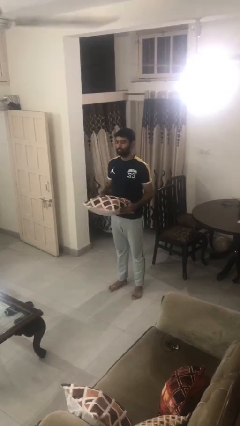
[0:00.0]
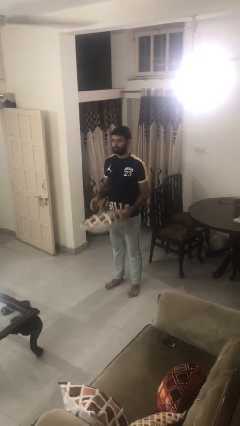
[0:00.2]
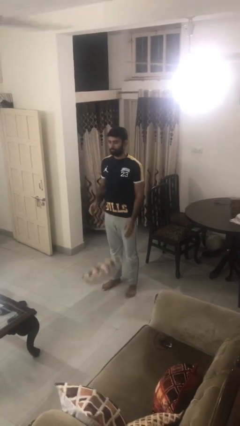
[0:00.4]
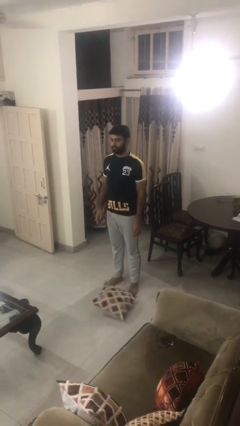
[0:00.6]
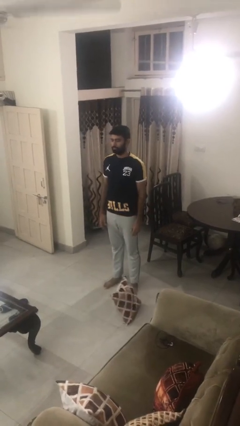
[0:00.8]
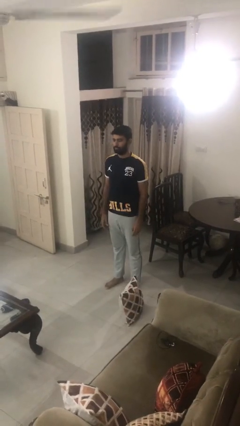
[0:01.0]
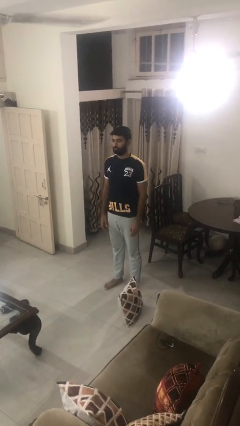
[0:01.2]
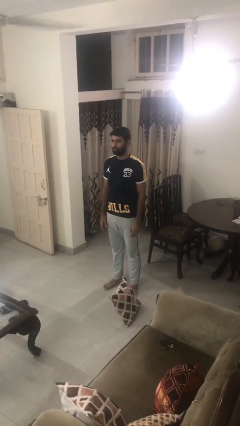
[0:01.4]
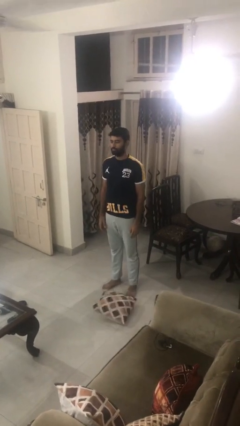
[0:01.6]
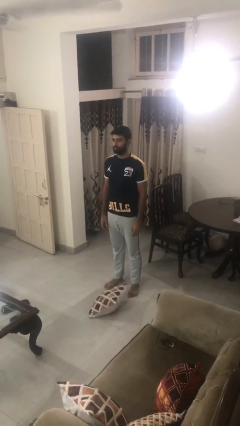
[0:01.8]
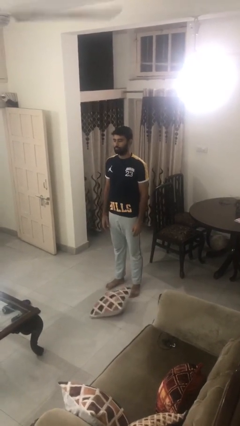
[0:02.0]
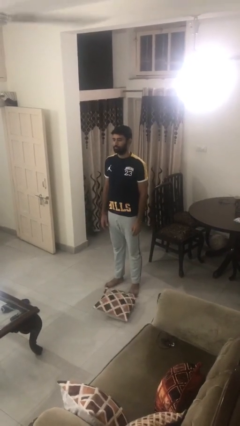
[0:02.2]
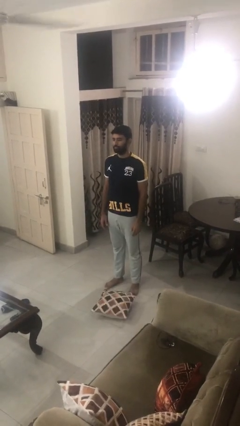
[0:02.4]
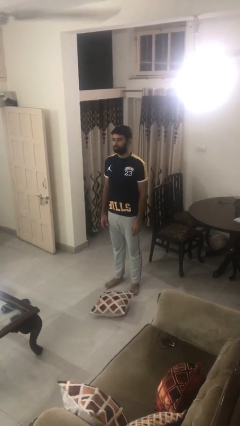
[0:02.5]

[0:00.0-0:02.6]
person drops object

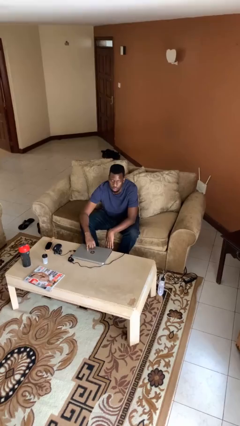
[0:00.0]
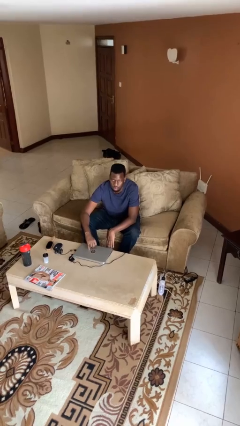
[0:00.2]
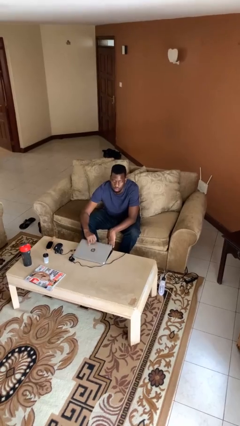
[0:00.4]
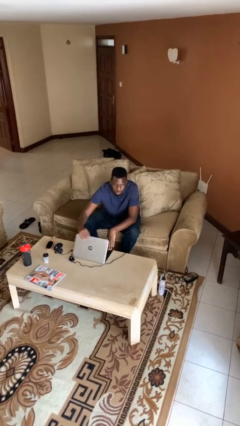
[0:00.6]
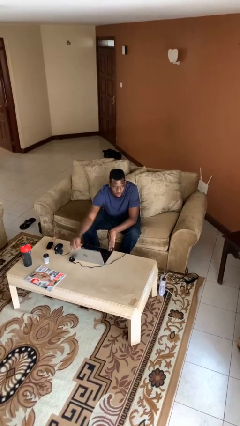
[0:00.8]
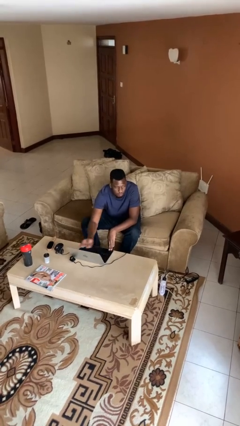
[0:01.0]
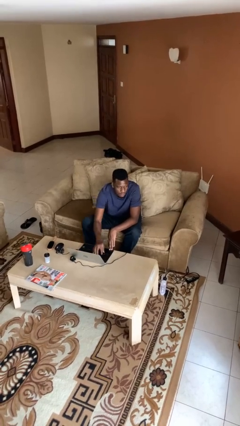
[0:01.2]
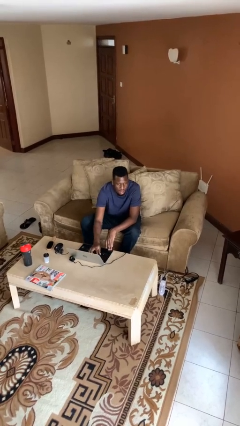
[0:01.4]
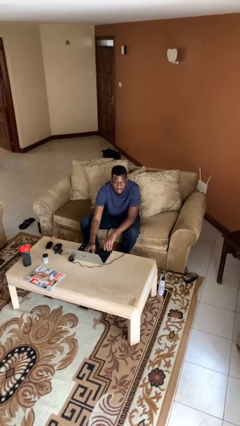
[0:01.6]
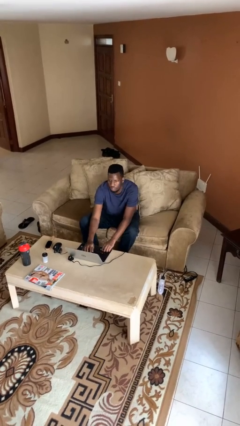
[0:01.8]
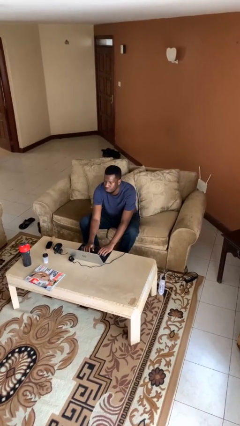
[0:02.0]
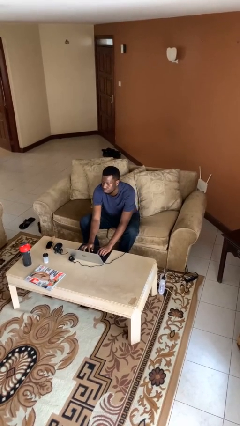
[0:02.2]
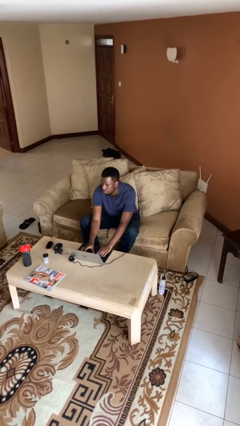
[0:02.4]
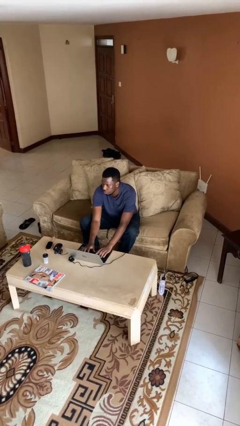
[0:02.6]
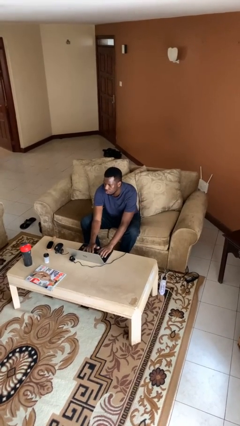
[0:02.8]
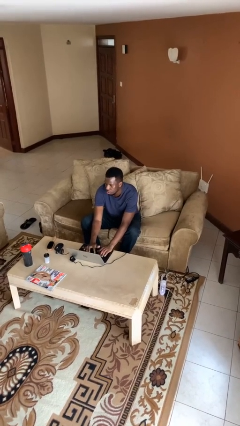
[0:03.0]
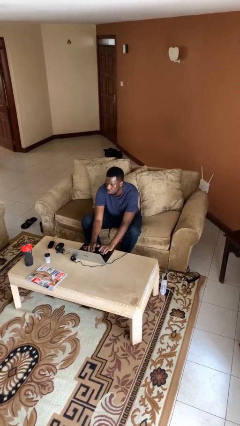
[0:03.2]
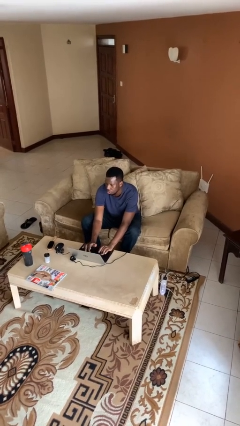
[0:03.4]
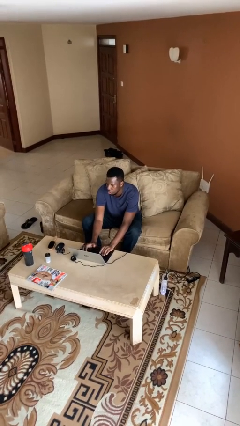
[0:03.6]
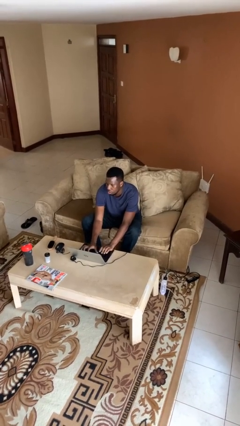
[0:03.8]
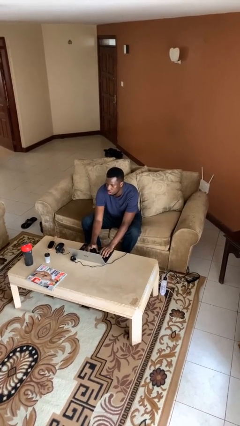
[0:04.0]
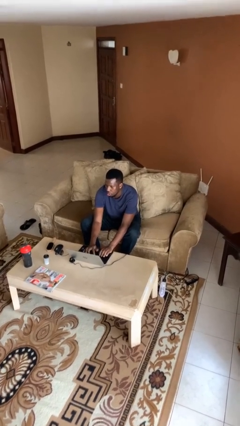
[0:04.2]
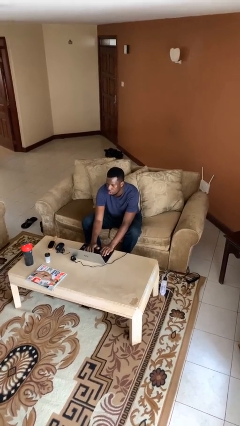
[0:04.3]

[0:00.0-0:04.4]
person interacts with laptop

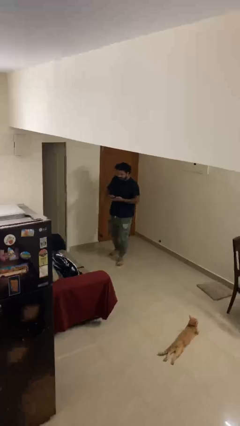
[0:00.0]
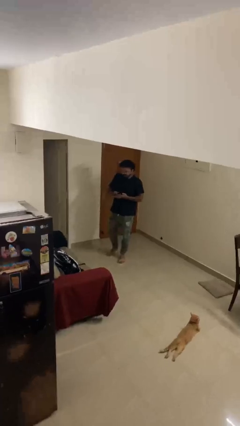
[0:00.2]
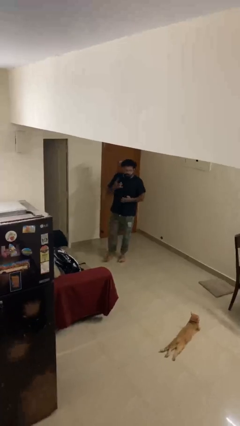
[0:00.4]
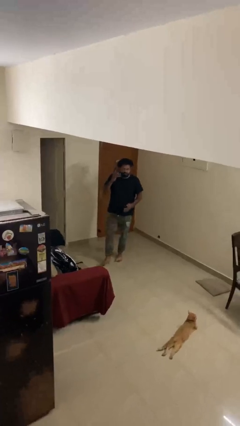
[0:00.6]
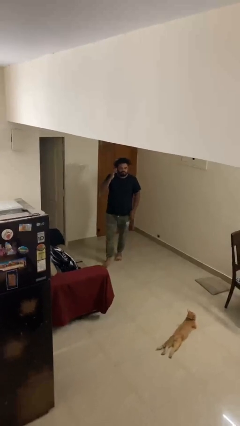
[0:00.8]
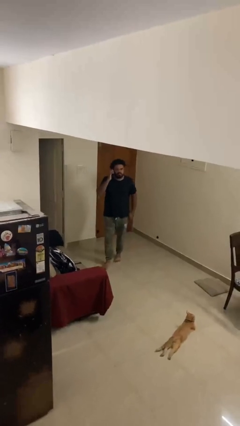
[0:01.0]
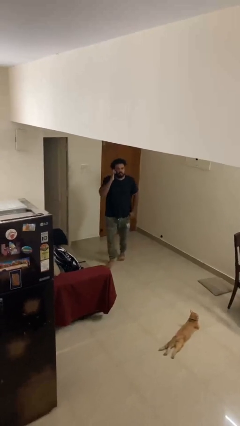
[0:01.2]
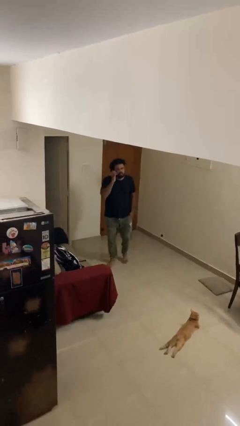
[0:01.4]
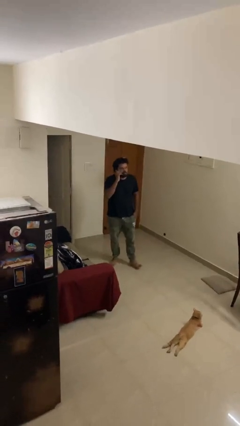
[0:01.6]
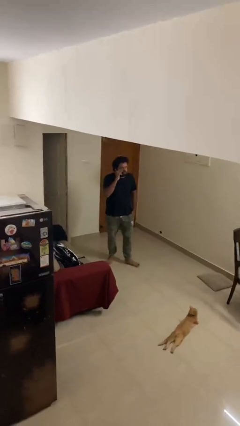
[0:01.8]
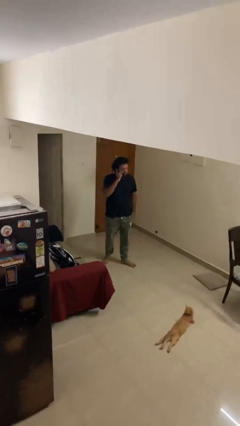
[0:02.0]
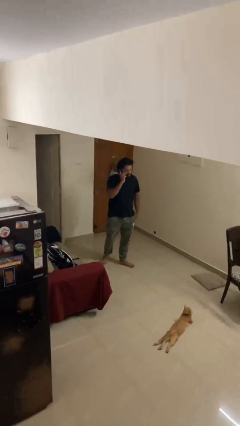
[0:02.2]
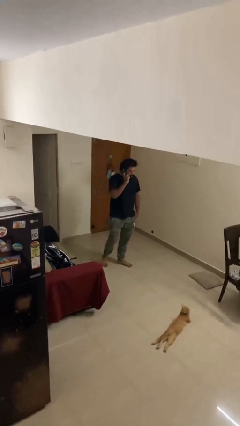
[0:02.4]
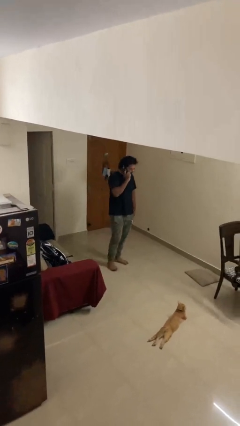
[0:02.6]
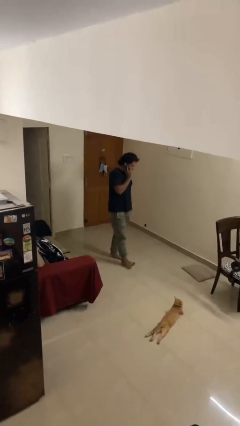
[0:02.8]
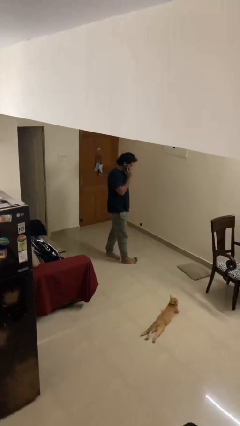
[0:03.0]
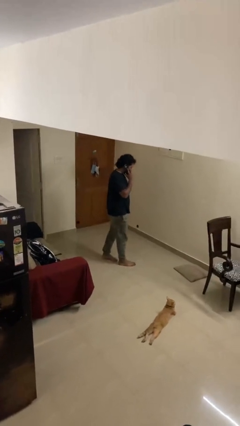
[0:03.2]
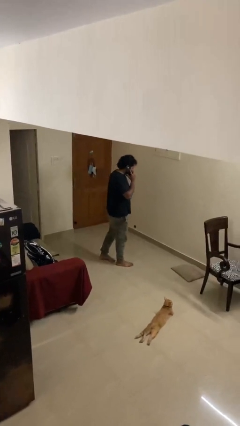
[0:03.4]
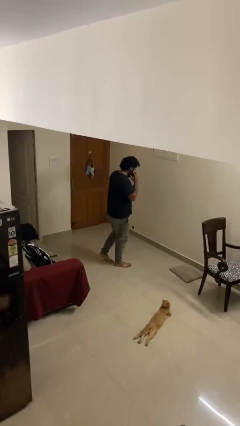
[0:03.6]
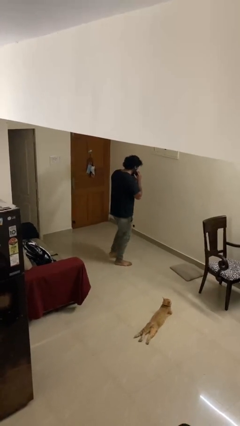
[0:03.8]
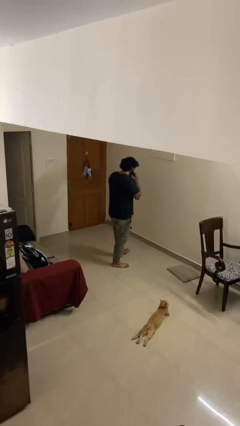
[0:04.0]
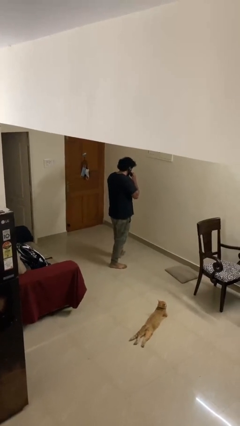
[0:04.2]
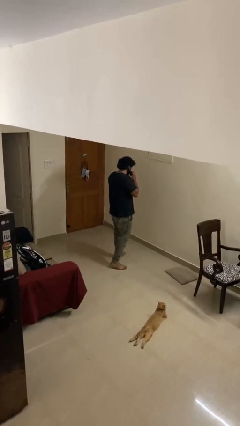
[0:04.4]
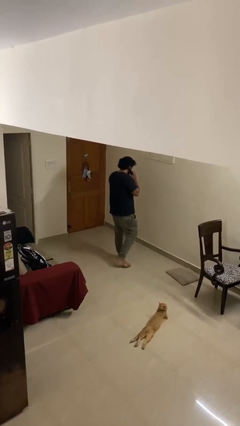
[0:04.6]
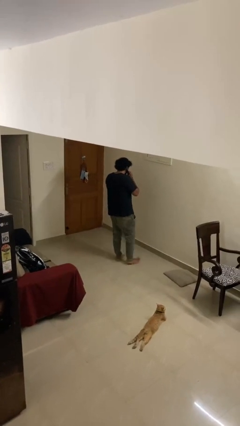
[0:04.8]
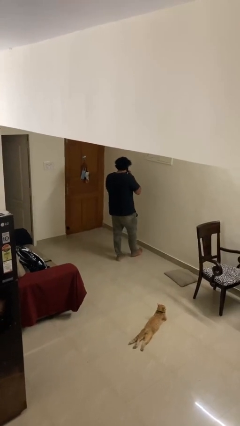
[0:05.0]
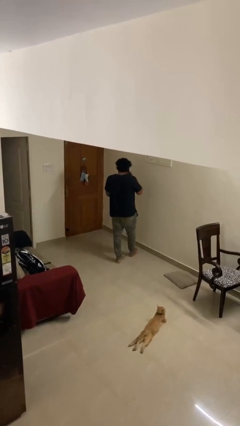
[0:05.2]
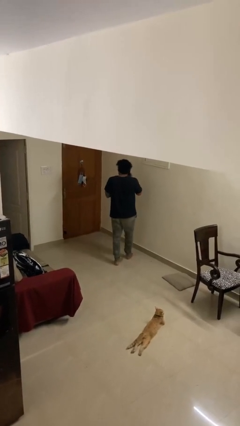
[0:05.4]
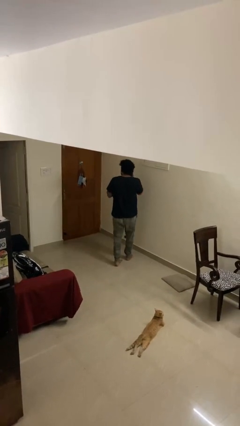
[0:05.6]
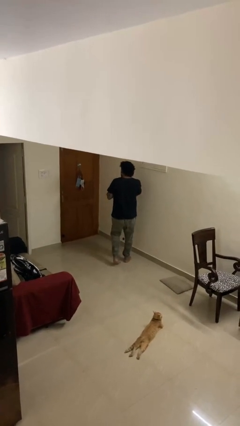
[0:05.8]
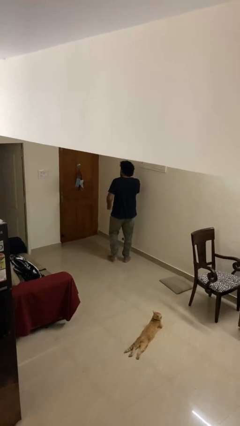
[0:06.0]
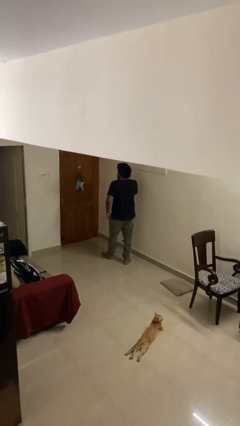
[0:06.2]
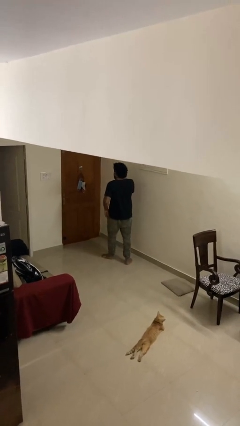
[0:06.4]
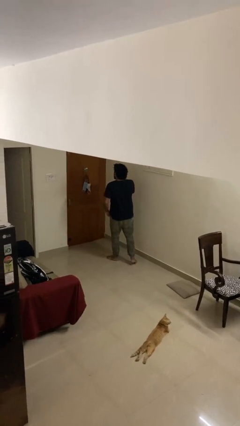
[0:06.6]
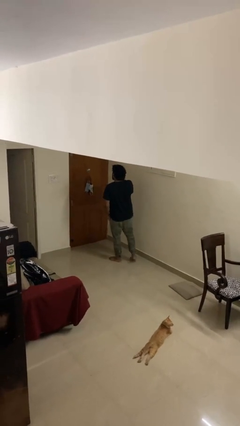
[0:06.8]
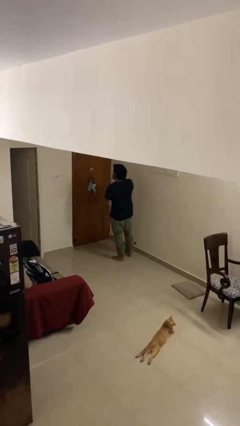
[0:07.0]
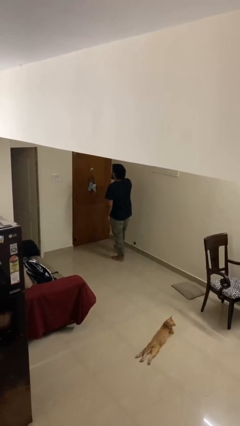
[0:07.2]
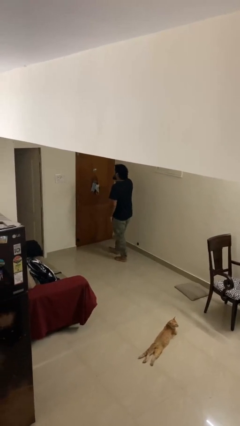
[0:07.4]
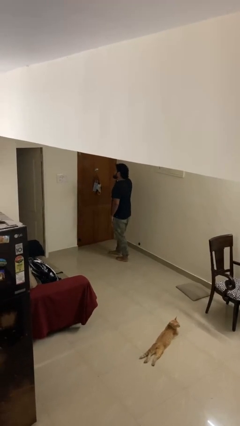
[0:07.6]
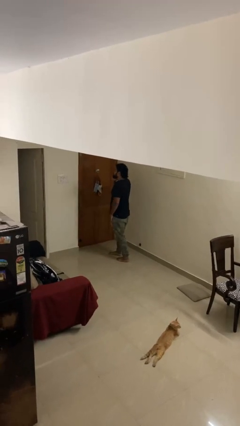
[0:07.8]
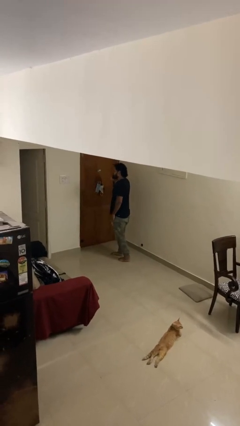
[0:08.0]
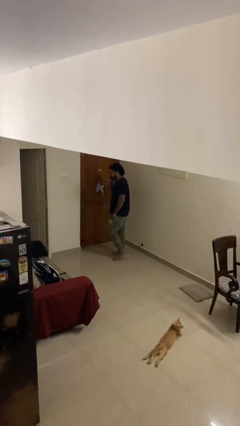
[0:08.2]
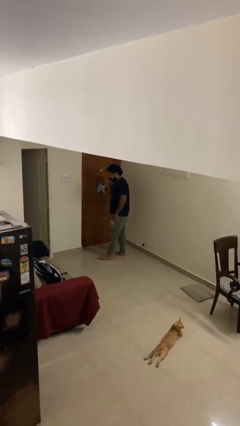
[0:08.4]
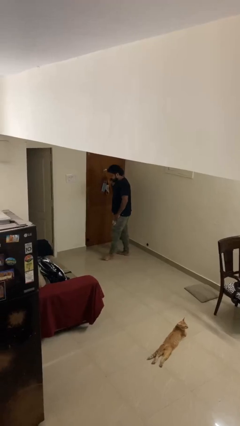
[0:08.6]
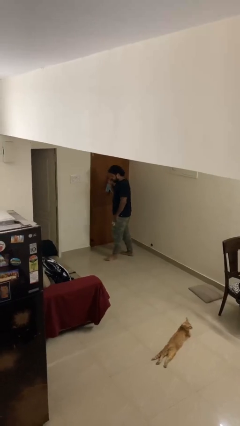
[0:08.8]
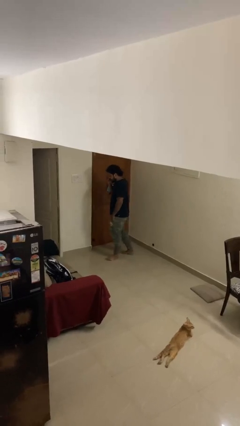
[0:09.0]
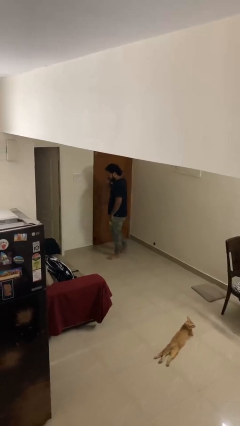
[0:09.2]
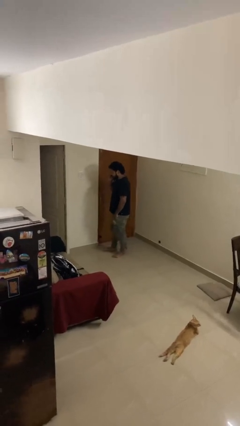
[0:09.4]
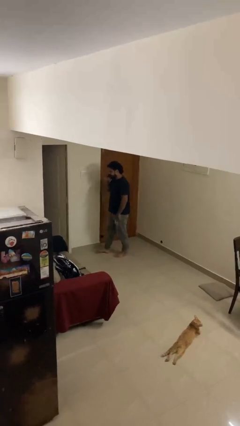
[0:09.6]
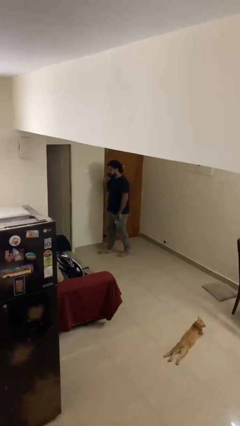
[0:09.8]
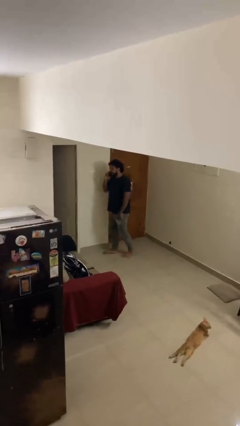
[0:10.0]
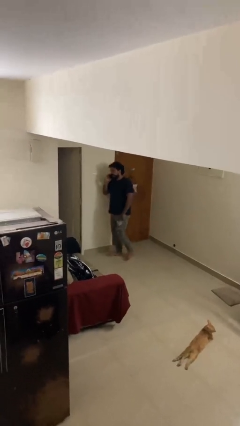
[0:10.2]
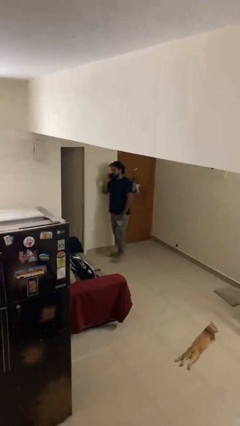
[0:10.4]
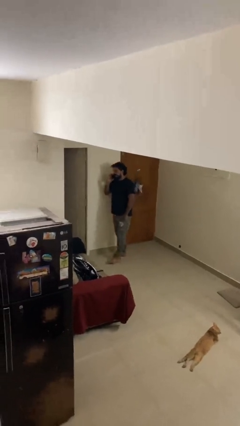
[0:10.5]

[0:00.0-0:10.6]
person talks on phone
